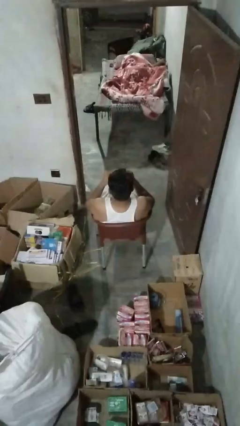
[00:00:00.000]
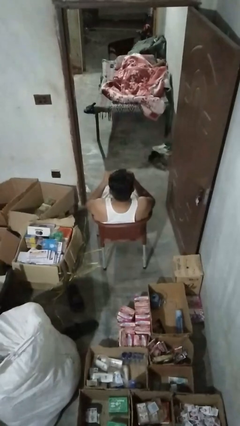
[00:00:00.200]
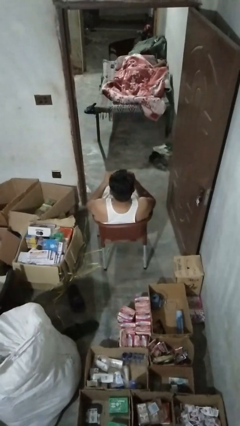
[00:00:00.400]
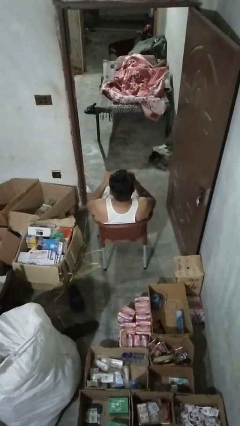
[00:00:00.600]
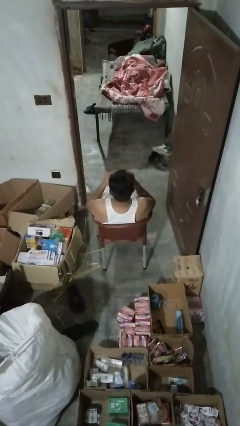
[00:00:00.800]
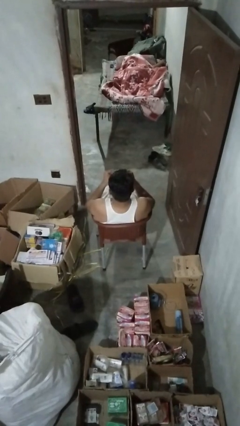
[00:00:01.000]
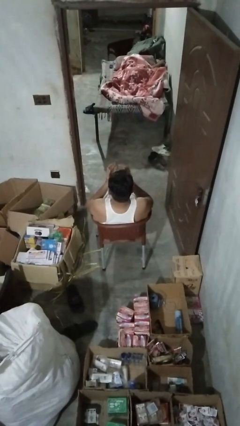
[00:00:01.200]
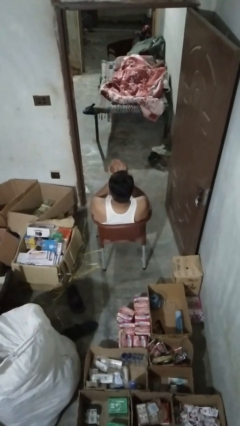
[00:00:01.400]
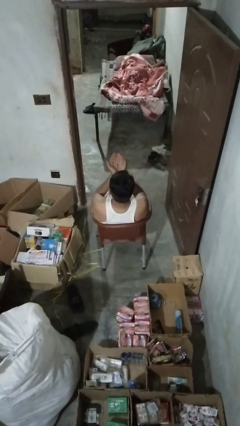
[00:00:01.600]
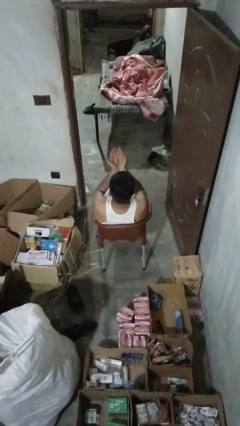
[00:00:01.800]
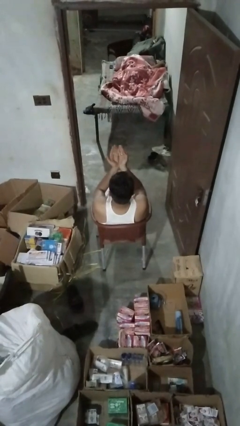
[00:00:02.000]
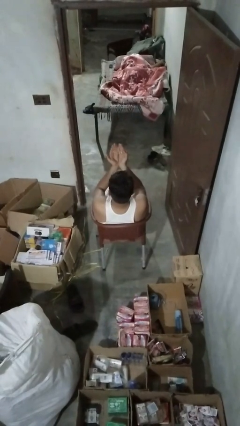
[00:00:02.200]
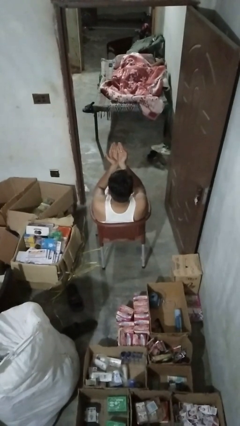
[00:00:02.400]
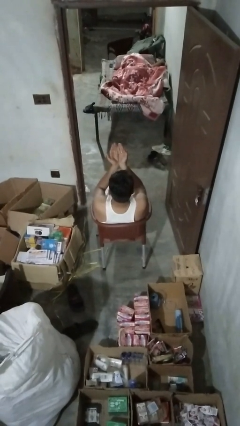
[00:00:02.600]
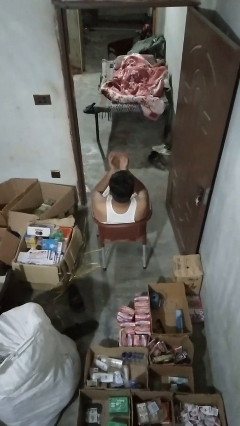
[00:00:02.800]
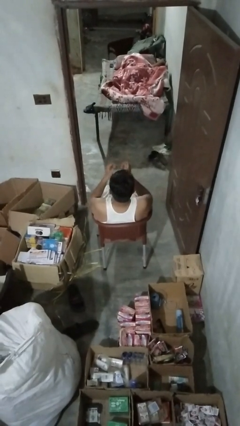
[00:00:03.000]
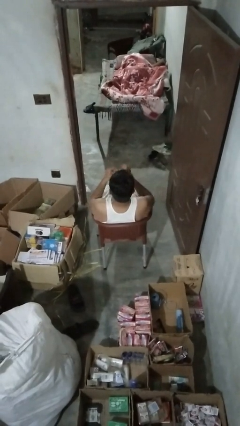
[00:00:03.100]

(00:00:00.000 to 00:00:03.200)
person prays

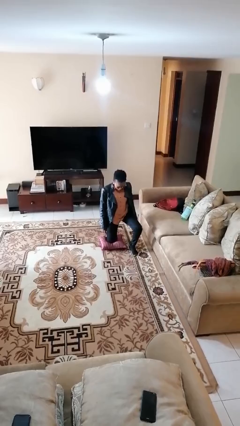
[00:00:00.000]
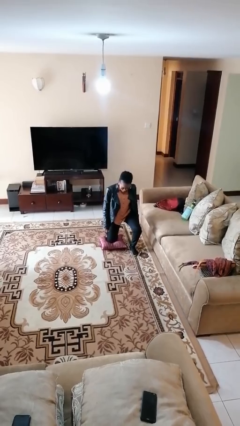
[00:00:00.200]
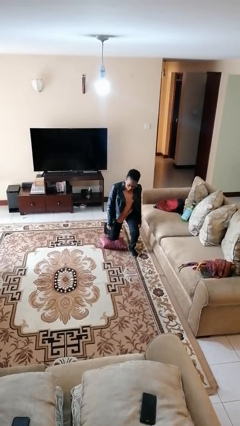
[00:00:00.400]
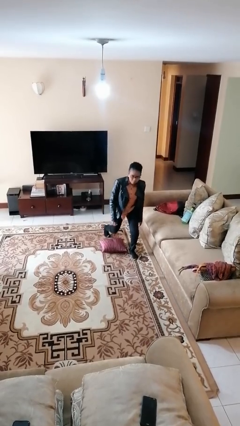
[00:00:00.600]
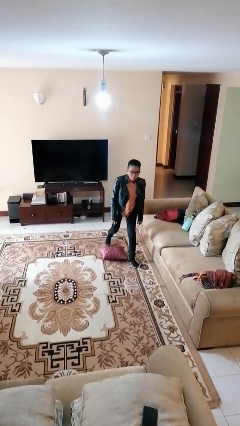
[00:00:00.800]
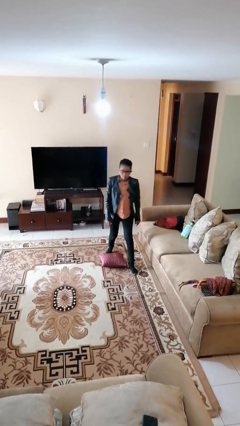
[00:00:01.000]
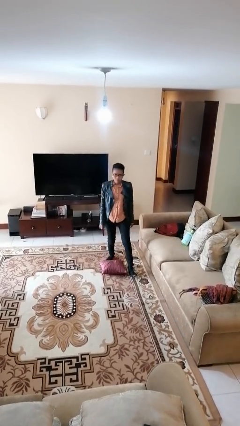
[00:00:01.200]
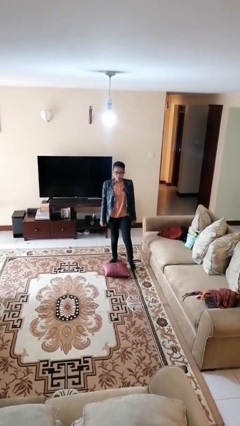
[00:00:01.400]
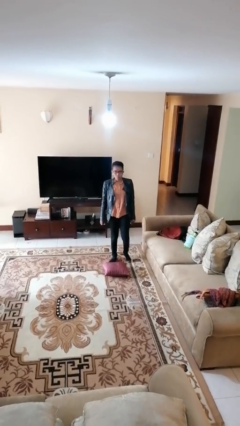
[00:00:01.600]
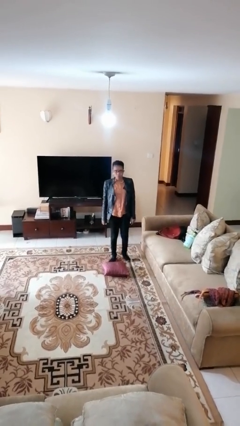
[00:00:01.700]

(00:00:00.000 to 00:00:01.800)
person stands up from floor

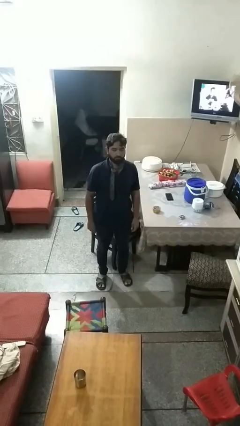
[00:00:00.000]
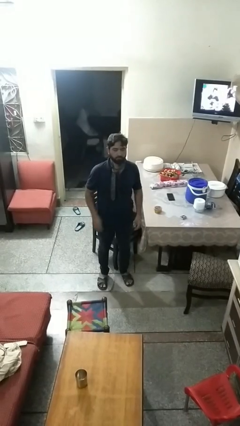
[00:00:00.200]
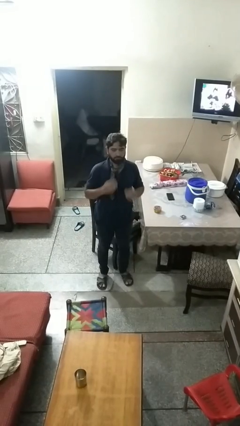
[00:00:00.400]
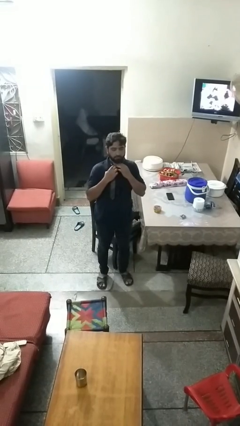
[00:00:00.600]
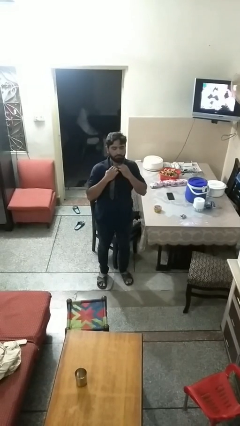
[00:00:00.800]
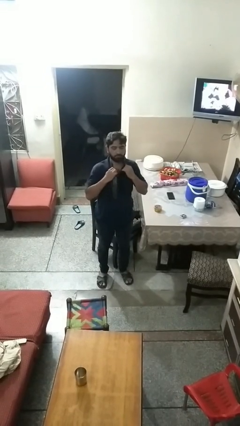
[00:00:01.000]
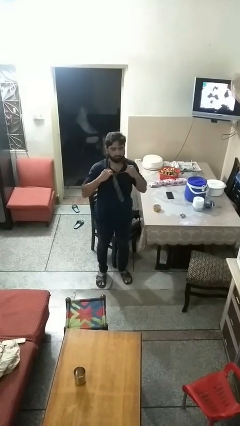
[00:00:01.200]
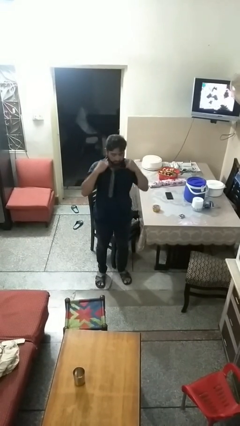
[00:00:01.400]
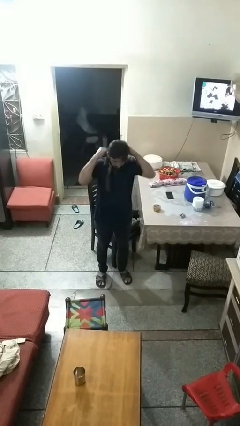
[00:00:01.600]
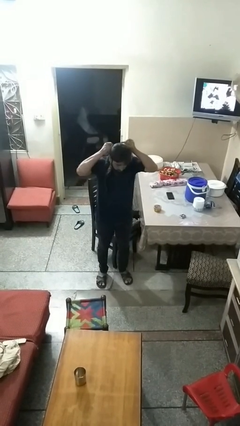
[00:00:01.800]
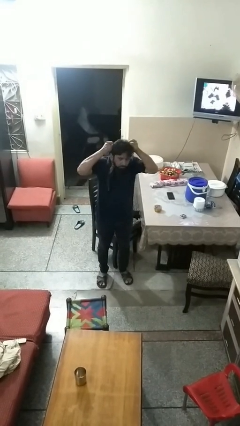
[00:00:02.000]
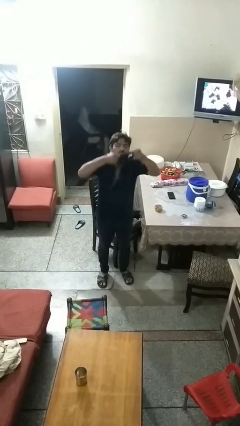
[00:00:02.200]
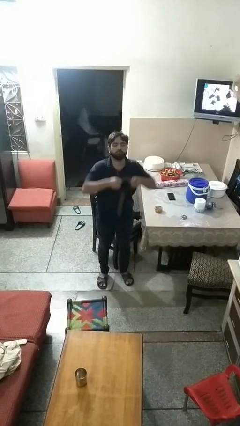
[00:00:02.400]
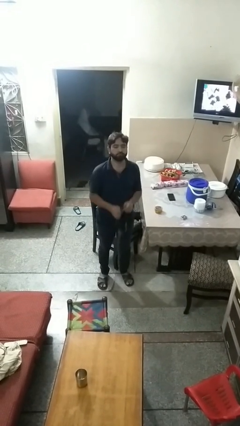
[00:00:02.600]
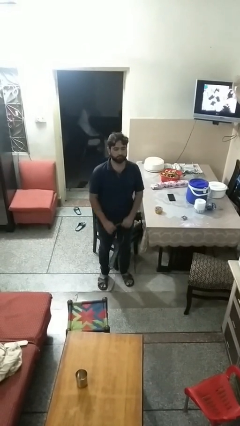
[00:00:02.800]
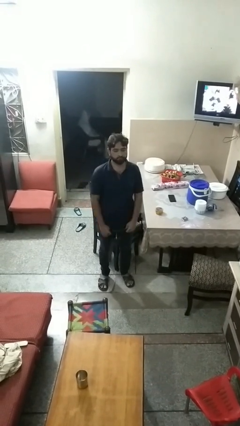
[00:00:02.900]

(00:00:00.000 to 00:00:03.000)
person takes off necktie

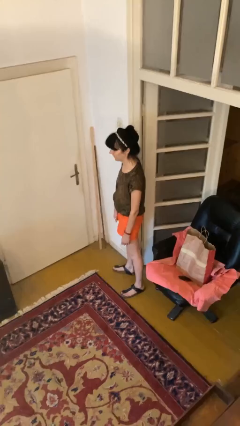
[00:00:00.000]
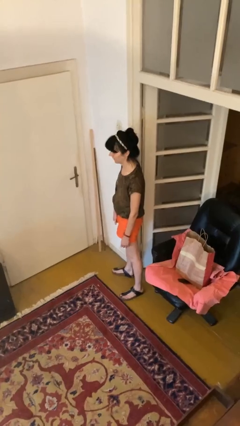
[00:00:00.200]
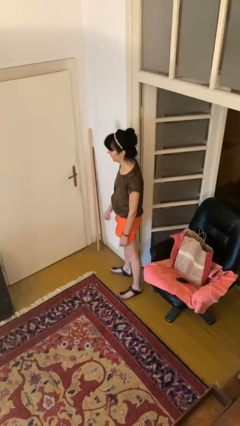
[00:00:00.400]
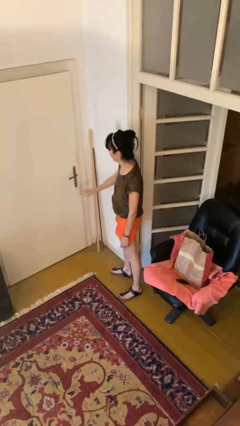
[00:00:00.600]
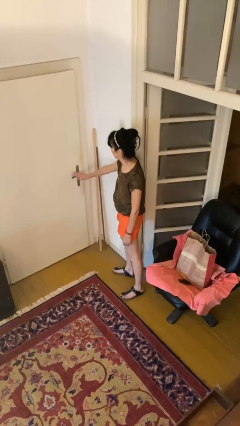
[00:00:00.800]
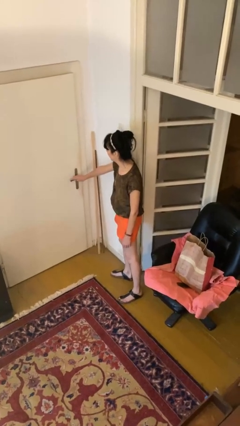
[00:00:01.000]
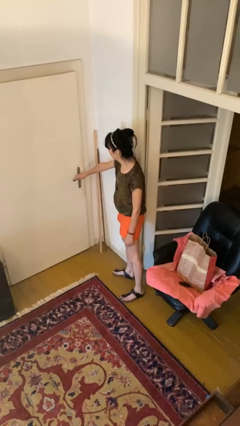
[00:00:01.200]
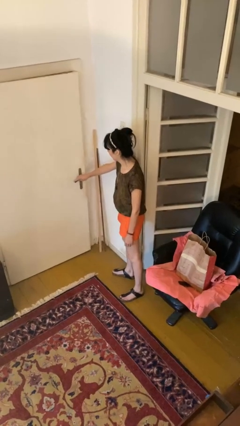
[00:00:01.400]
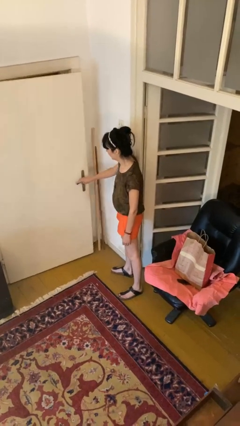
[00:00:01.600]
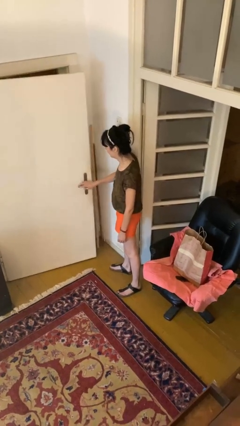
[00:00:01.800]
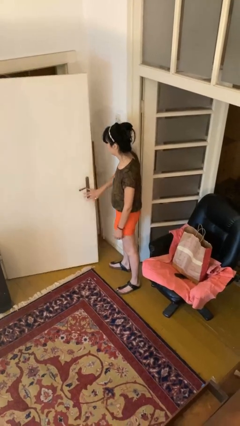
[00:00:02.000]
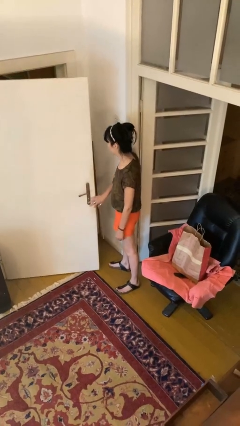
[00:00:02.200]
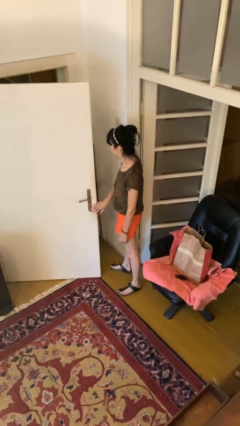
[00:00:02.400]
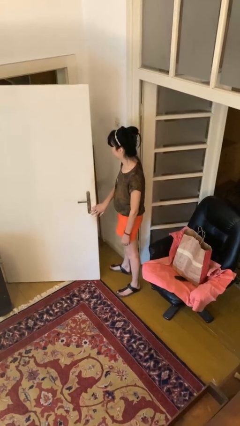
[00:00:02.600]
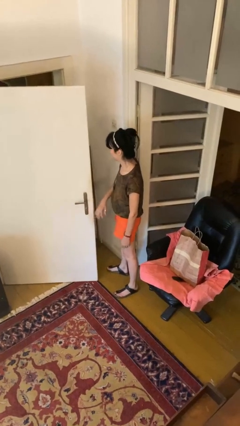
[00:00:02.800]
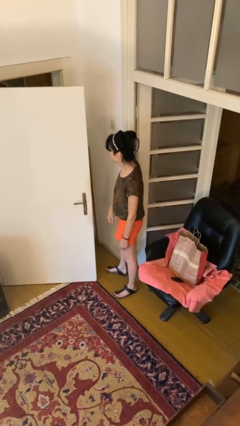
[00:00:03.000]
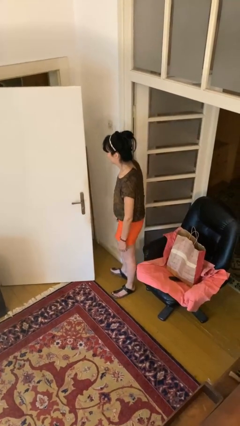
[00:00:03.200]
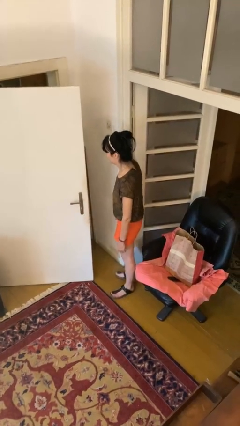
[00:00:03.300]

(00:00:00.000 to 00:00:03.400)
person opens facility door

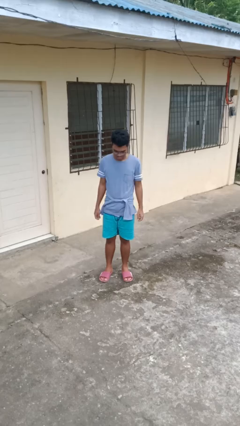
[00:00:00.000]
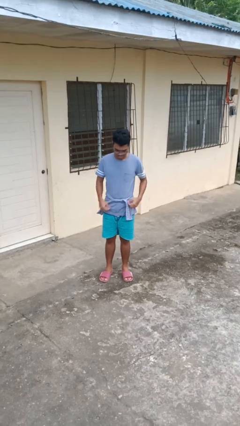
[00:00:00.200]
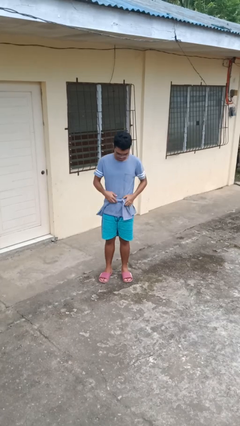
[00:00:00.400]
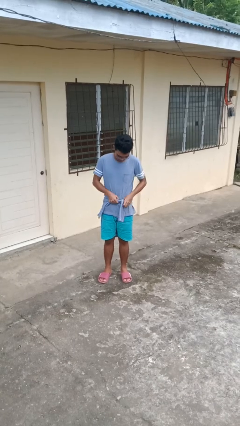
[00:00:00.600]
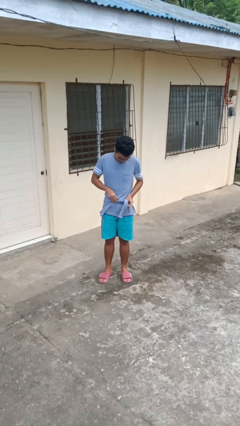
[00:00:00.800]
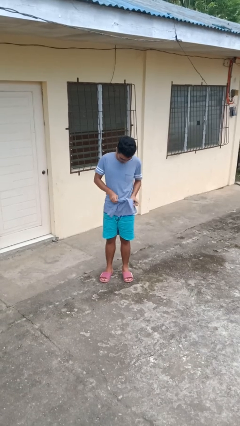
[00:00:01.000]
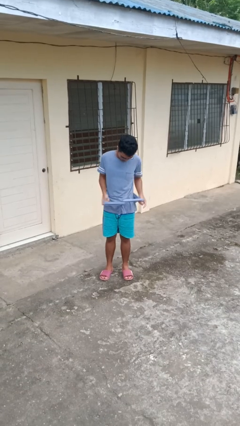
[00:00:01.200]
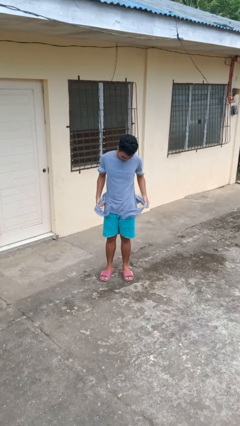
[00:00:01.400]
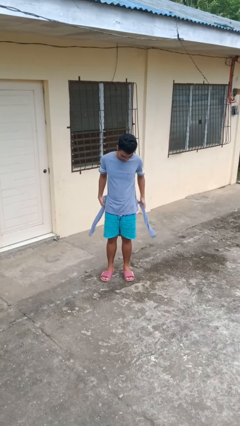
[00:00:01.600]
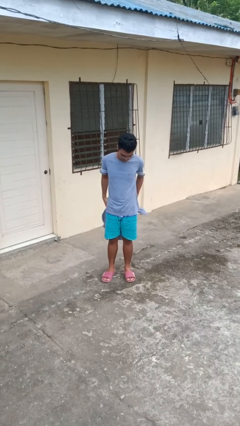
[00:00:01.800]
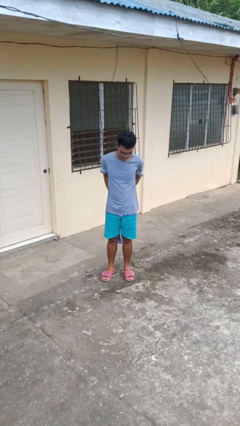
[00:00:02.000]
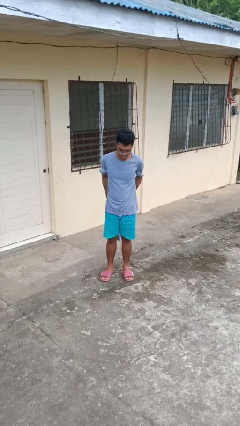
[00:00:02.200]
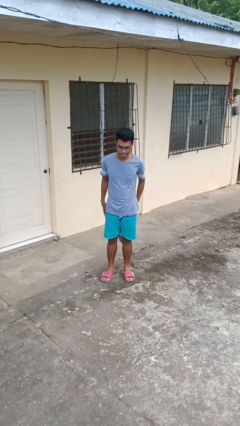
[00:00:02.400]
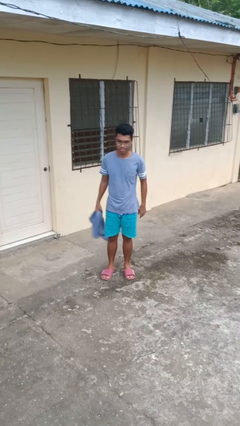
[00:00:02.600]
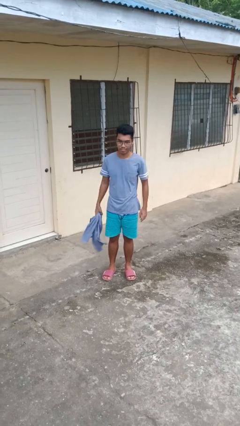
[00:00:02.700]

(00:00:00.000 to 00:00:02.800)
person unties jacket around waist

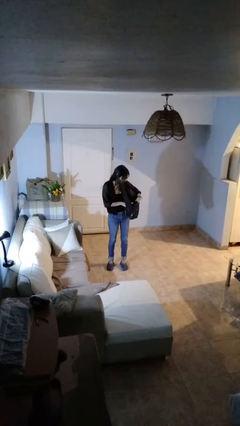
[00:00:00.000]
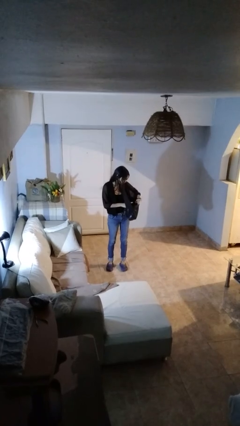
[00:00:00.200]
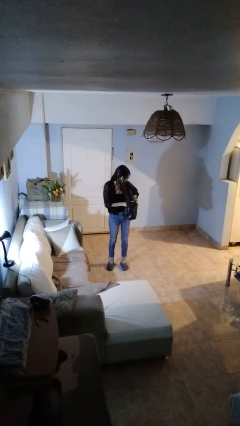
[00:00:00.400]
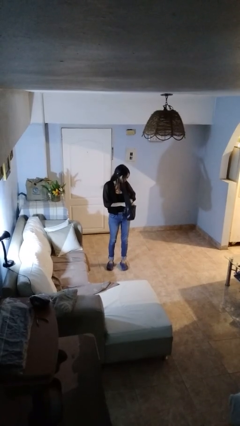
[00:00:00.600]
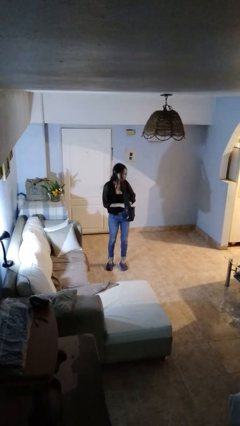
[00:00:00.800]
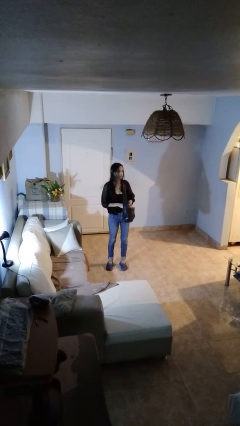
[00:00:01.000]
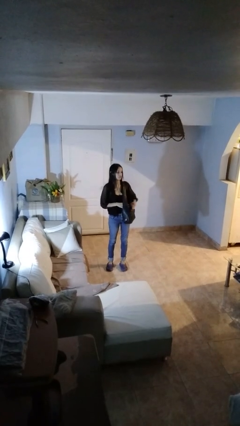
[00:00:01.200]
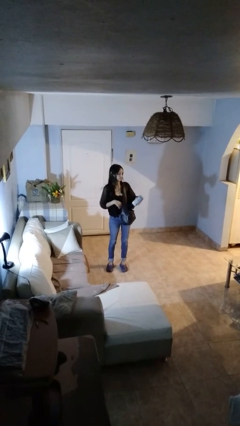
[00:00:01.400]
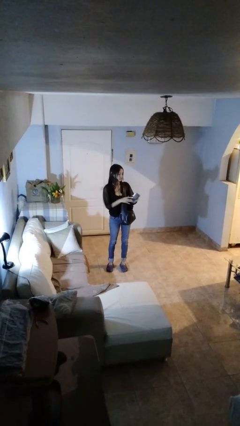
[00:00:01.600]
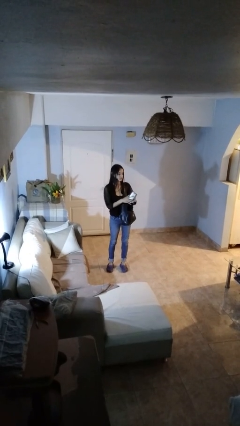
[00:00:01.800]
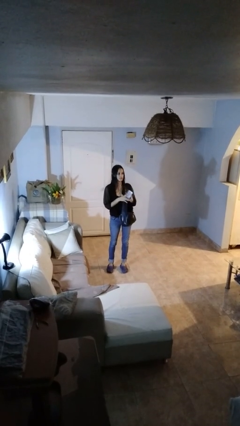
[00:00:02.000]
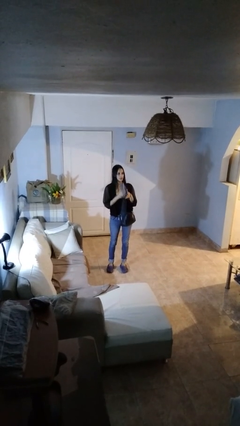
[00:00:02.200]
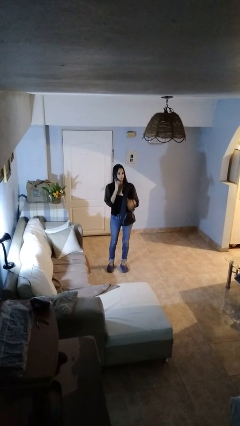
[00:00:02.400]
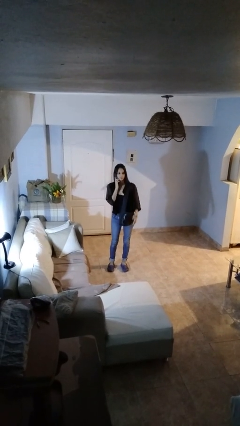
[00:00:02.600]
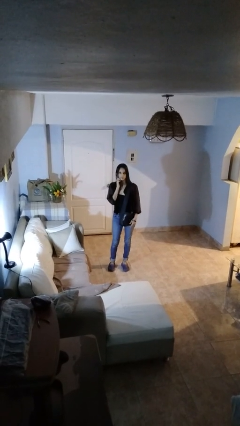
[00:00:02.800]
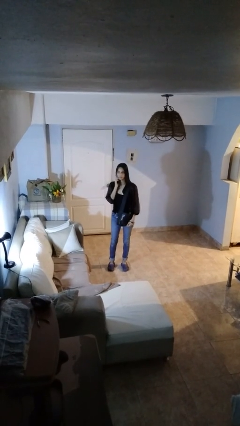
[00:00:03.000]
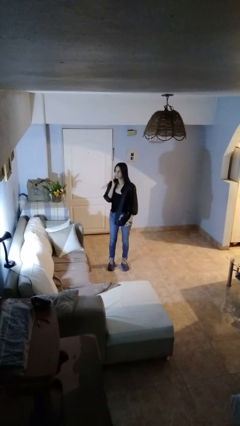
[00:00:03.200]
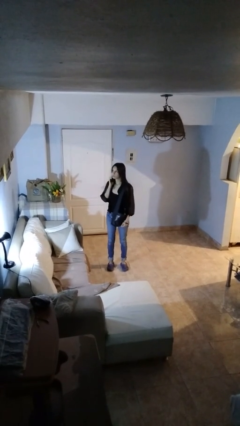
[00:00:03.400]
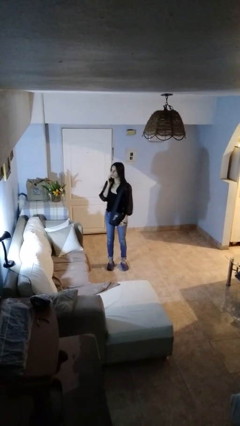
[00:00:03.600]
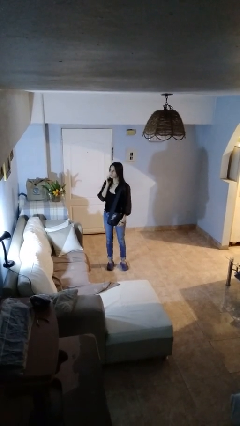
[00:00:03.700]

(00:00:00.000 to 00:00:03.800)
person takes object from purse
